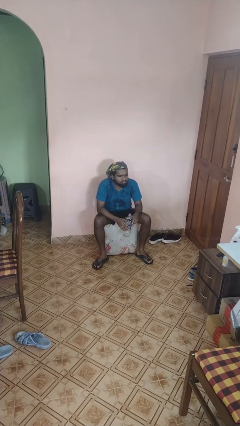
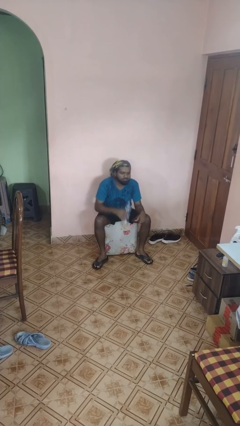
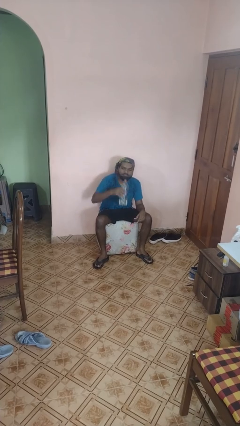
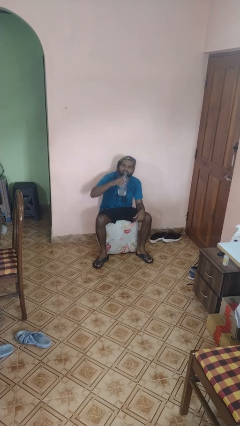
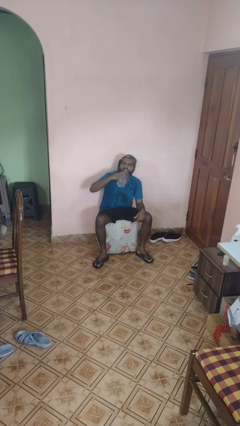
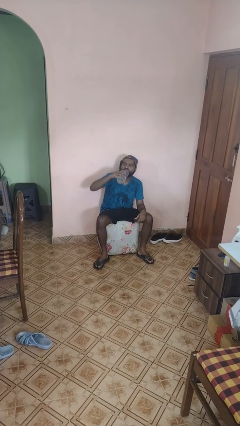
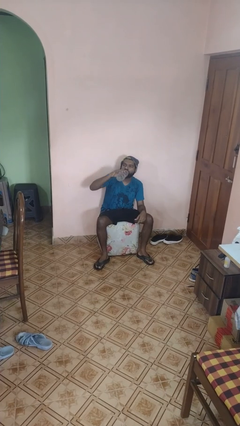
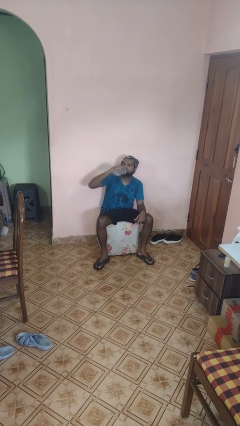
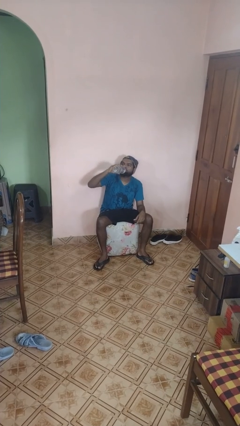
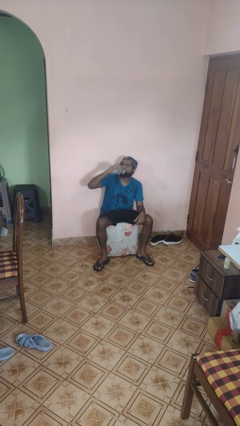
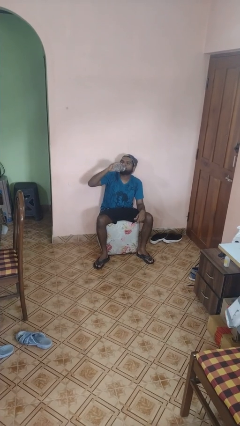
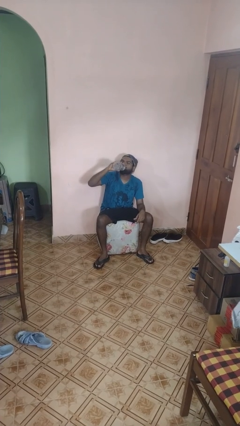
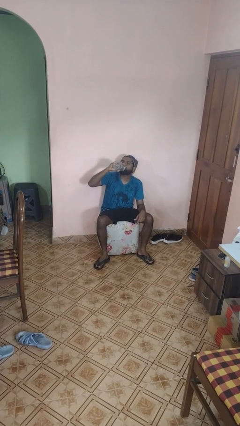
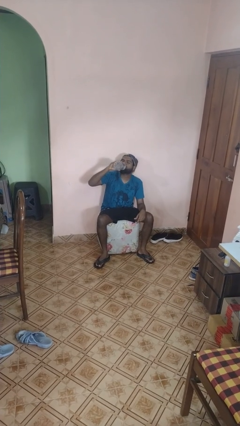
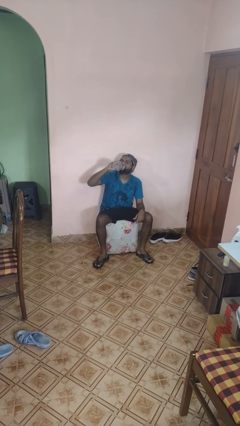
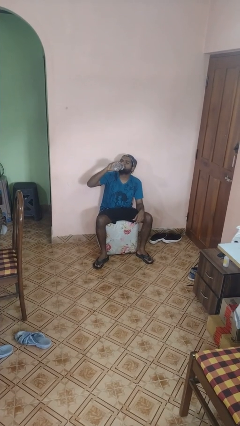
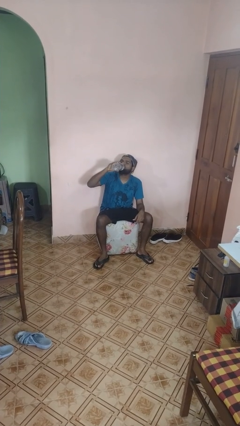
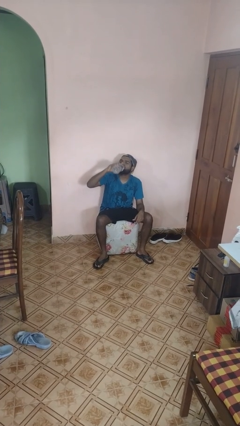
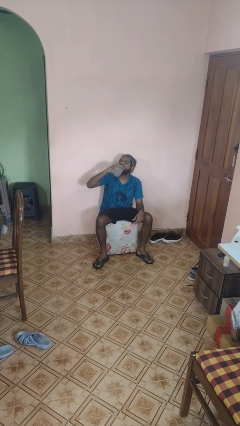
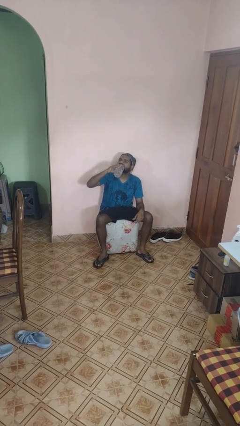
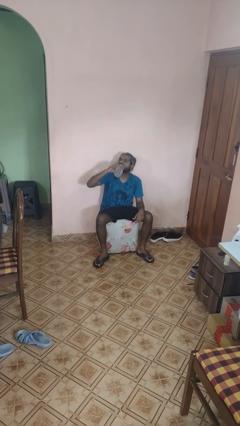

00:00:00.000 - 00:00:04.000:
person drinks from bottle

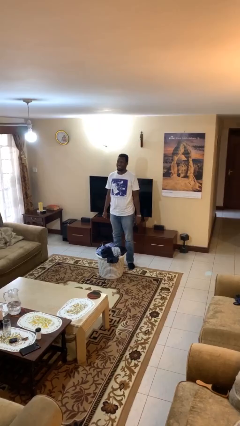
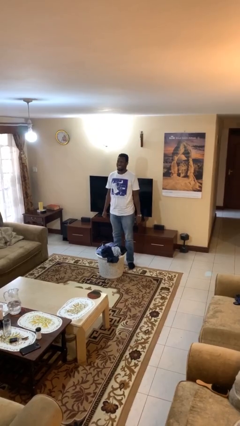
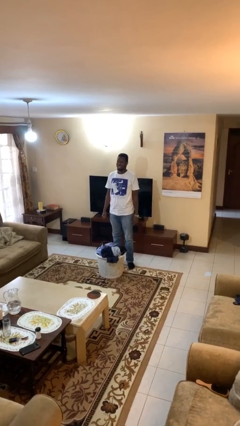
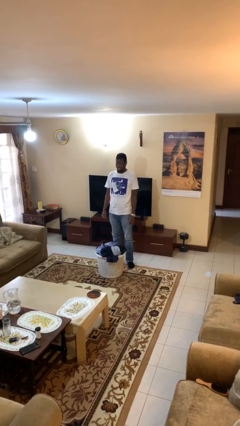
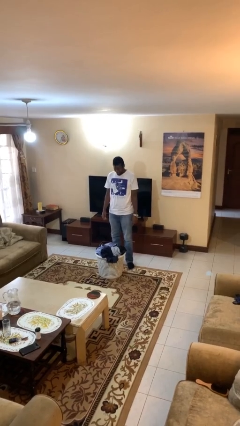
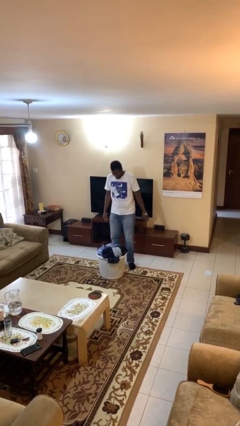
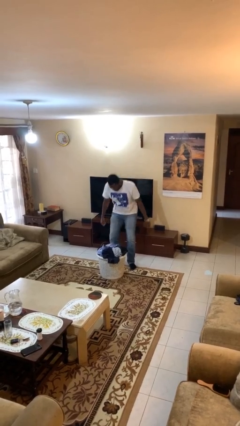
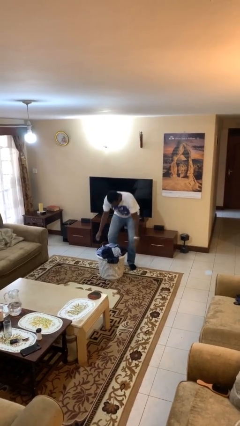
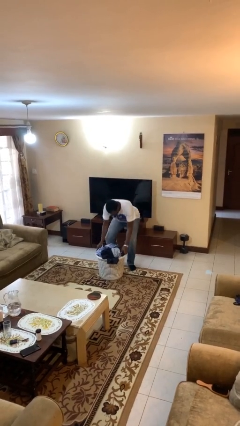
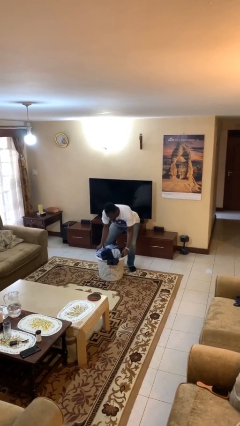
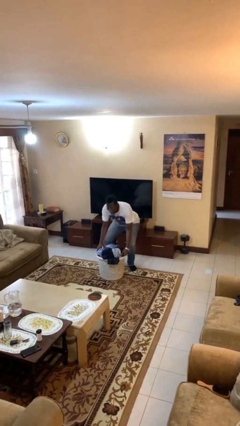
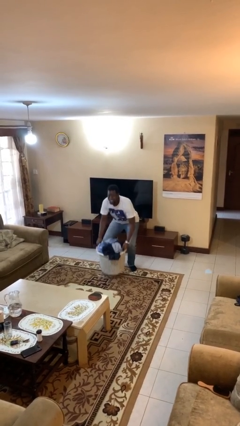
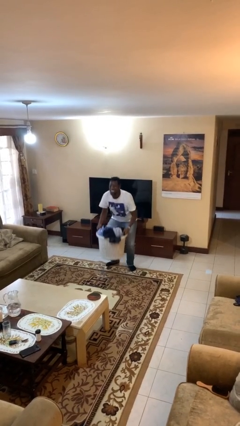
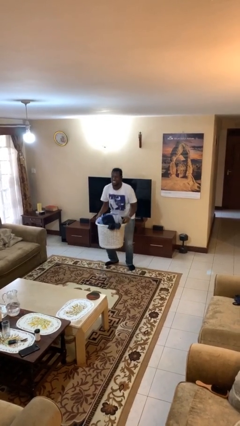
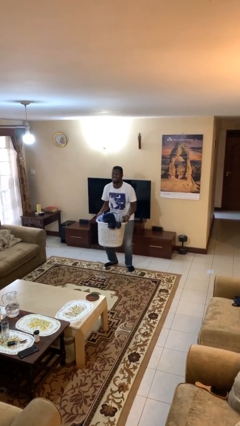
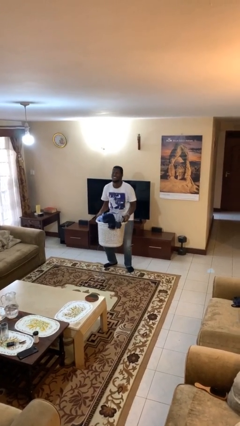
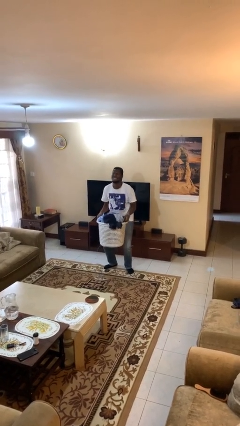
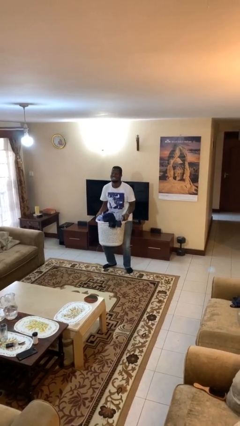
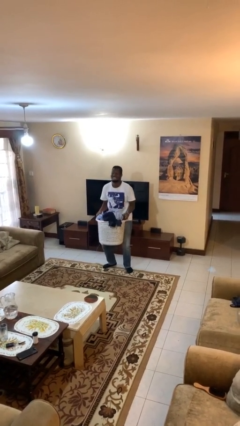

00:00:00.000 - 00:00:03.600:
person picks up object from floor

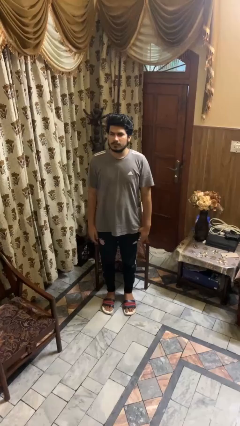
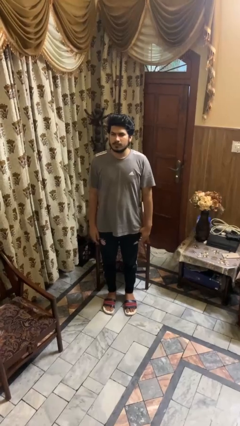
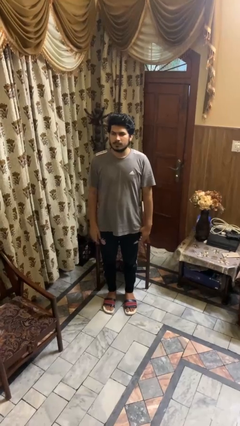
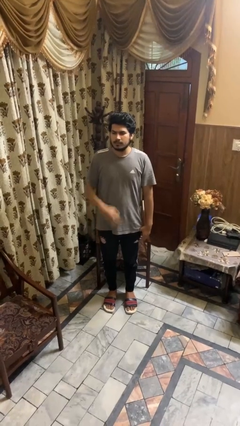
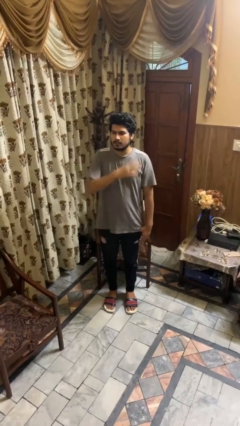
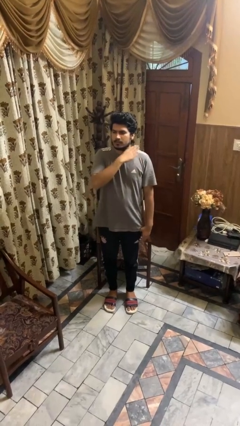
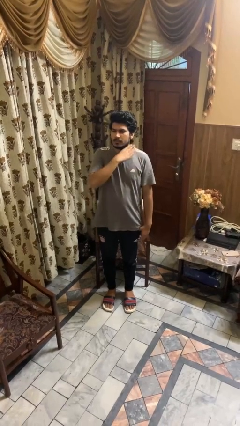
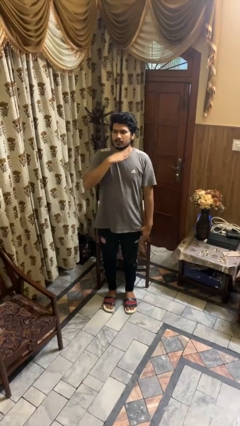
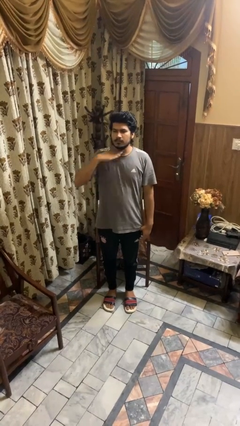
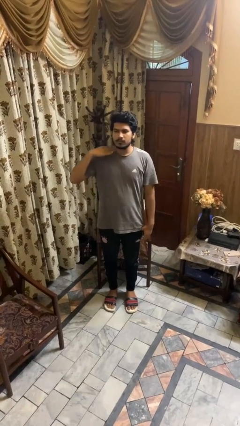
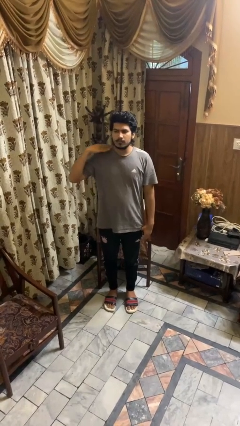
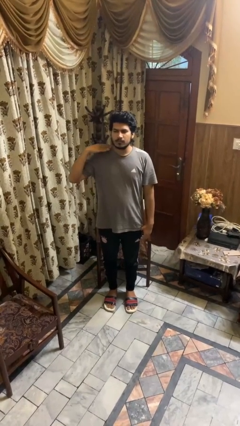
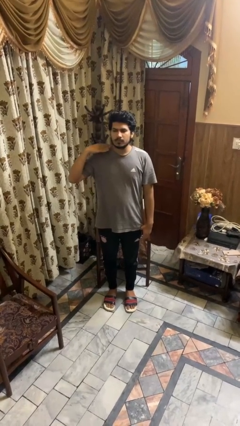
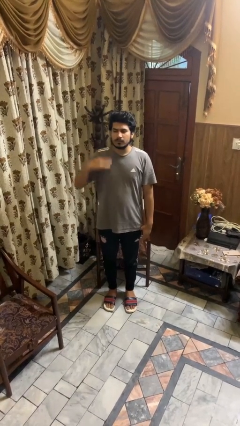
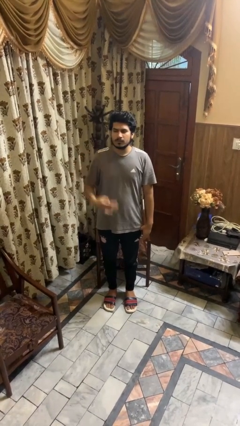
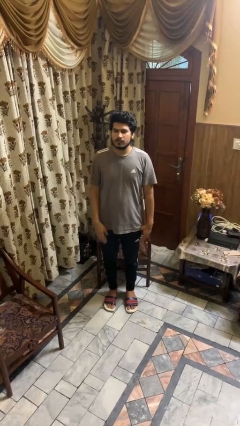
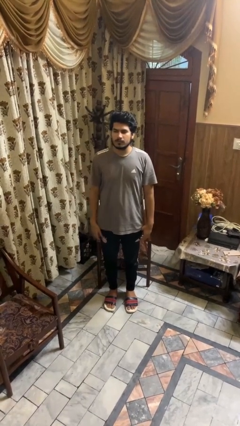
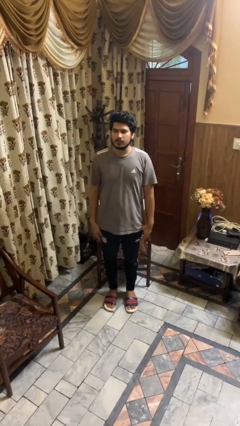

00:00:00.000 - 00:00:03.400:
person gestures cut

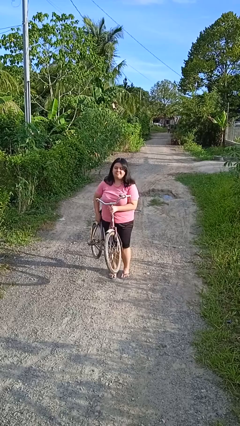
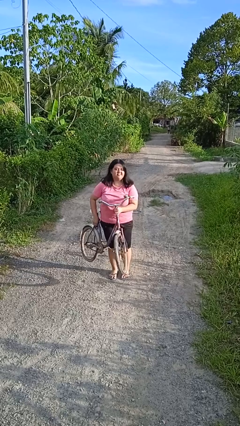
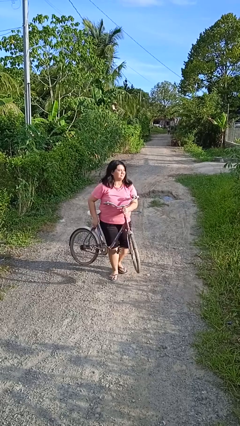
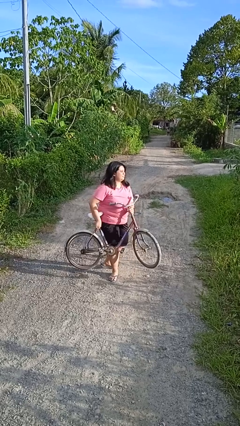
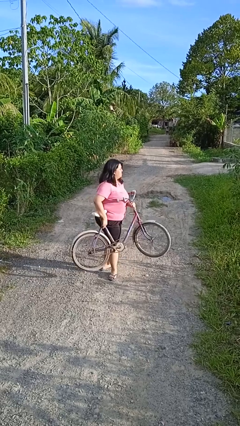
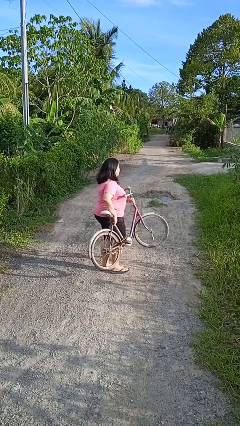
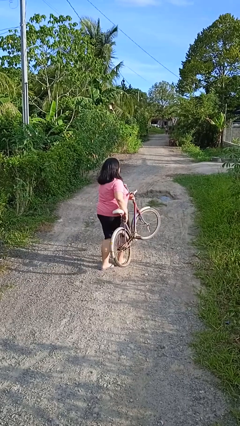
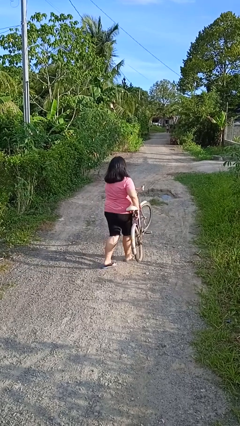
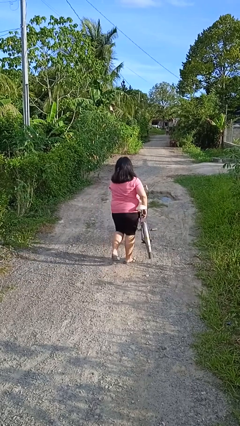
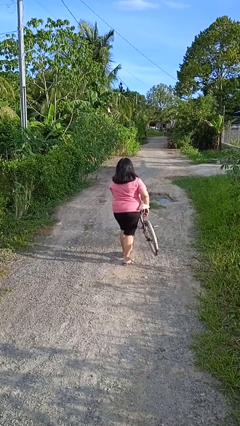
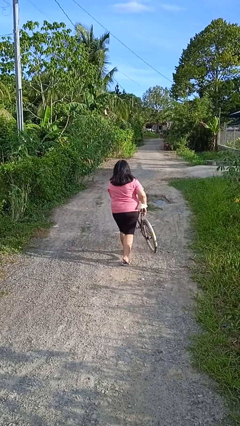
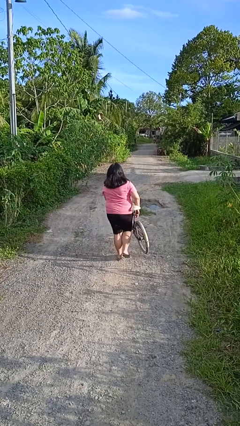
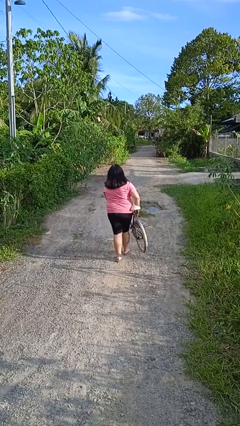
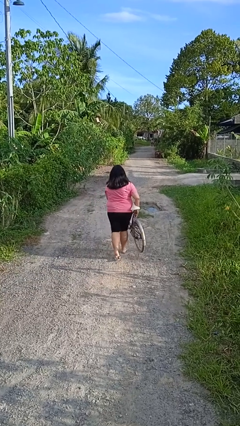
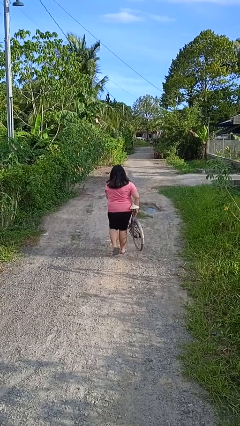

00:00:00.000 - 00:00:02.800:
person carries bicycle

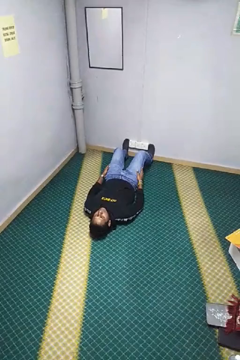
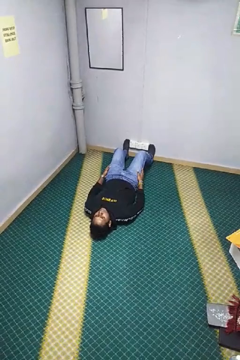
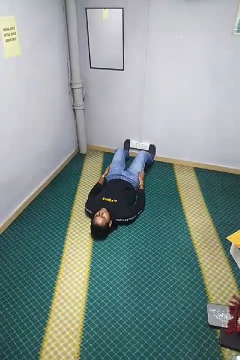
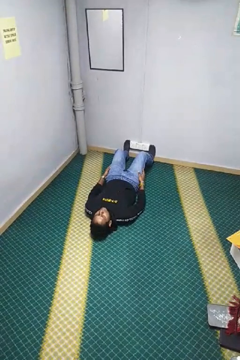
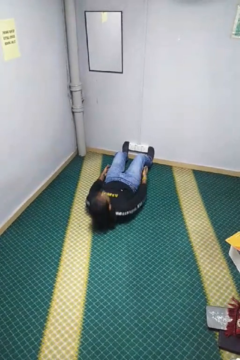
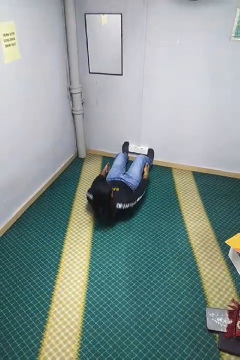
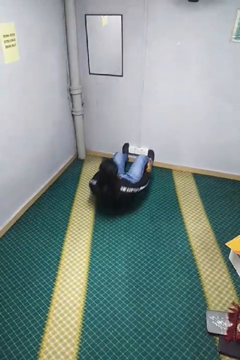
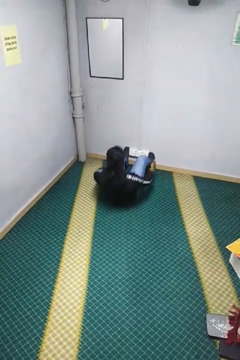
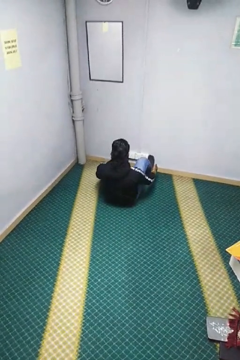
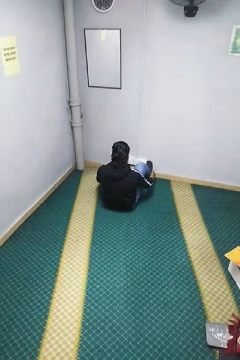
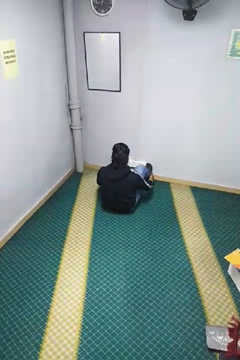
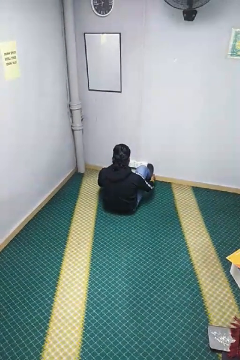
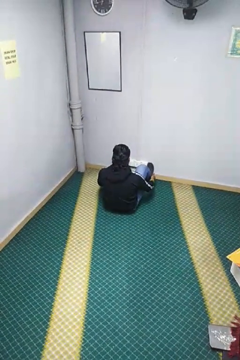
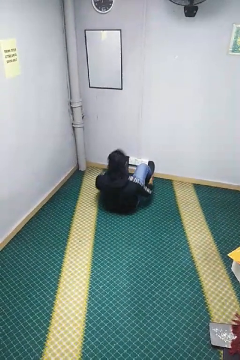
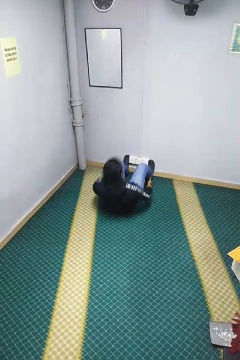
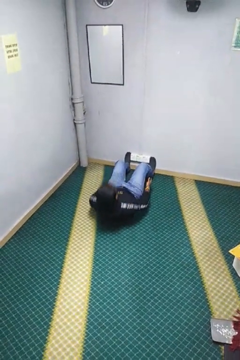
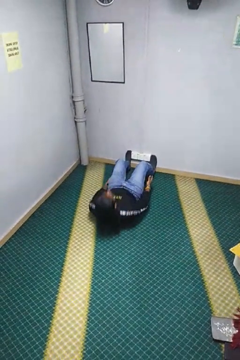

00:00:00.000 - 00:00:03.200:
person exercises with situp

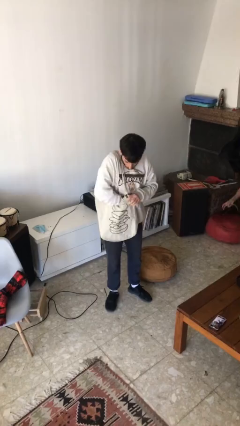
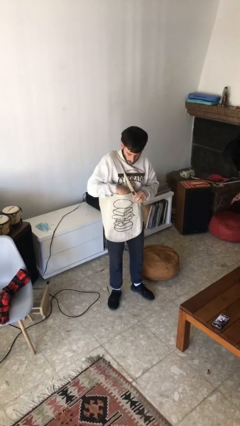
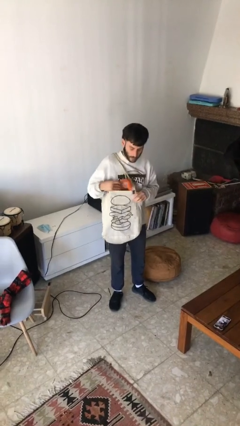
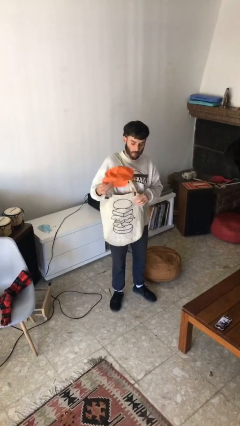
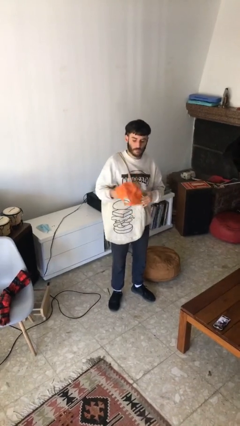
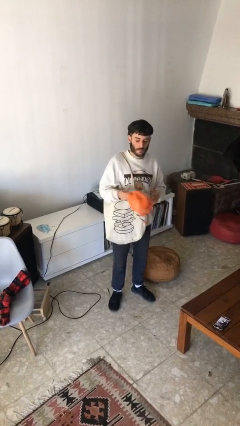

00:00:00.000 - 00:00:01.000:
person takes object from purse

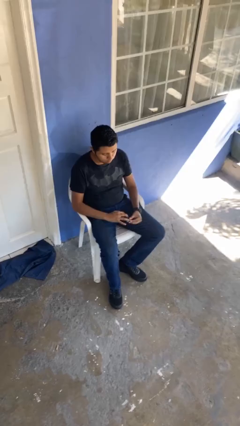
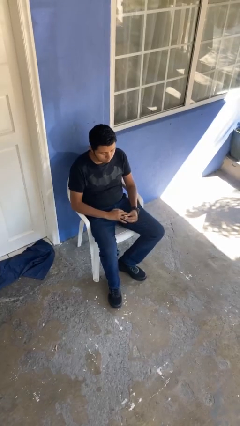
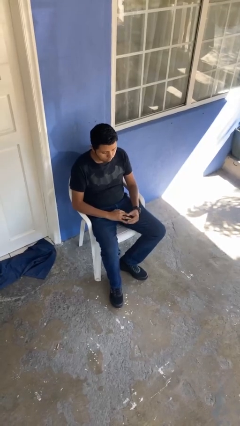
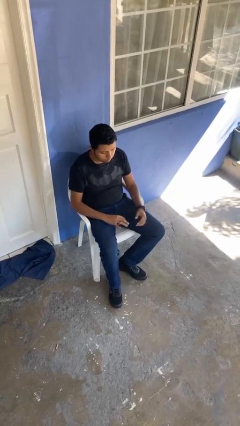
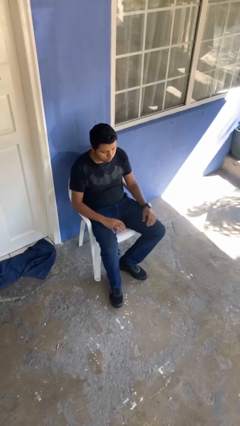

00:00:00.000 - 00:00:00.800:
person puts on ring
